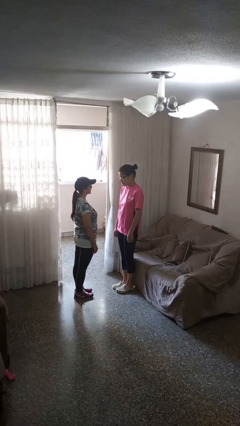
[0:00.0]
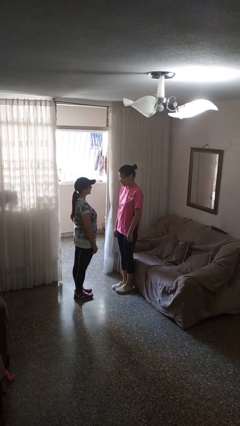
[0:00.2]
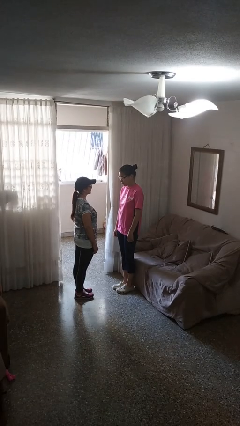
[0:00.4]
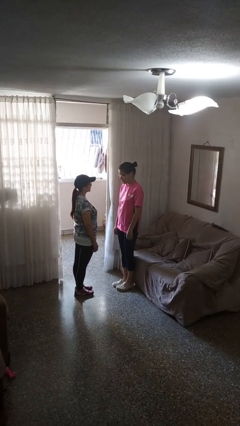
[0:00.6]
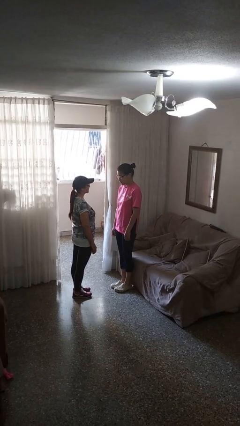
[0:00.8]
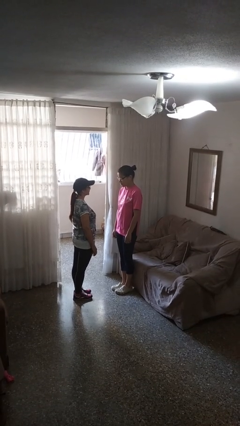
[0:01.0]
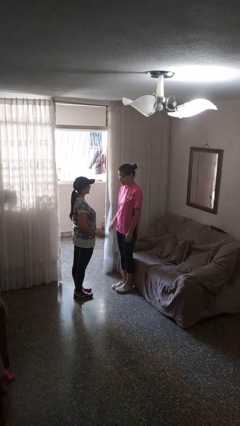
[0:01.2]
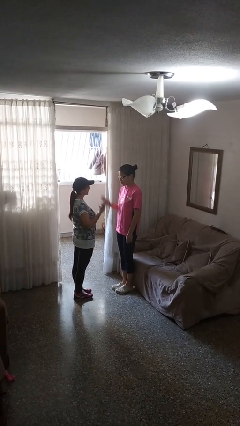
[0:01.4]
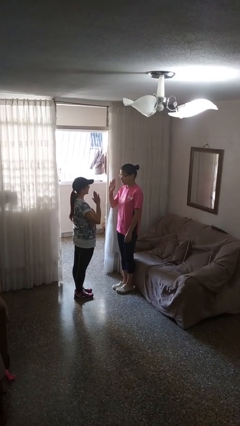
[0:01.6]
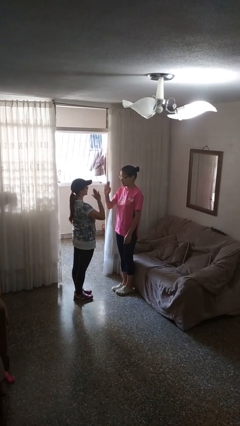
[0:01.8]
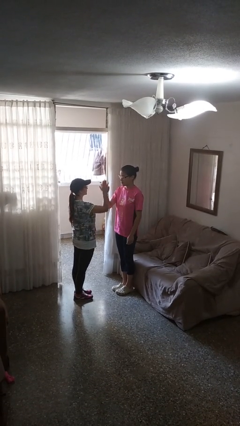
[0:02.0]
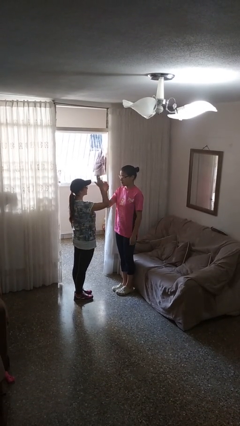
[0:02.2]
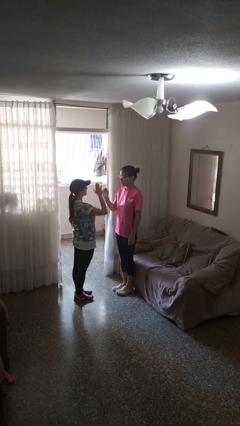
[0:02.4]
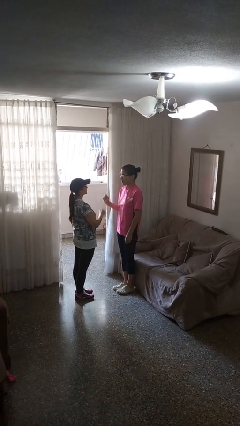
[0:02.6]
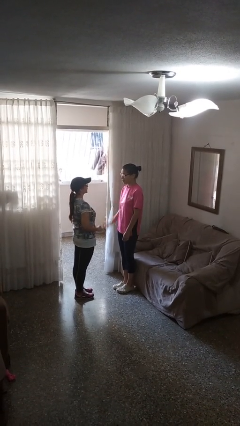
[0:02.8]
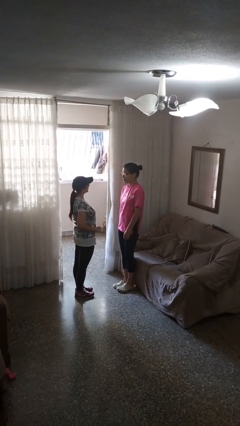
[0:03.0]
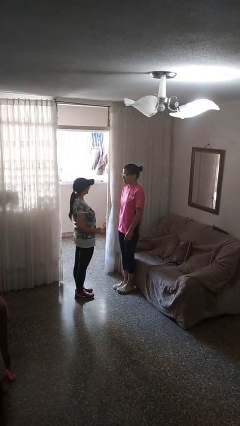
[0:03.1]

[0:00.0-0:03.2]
person highfives hand

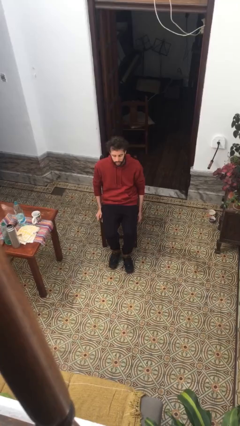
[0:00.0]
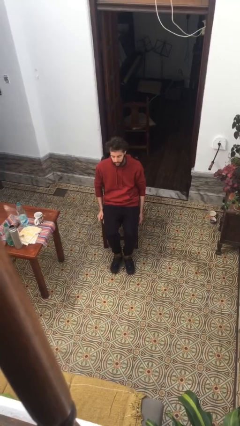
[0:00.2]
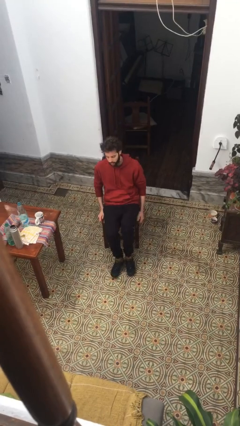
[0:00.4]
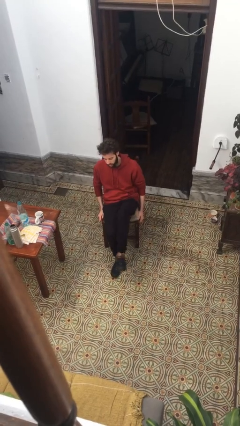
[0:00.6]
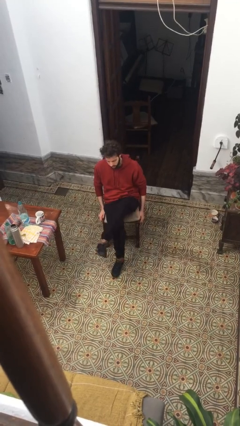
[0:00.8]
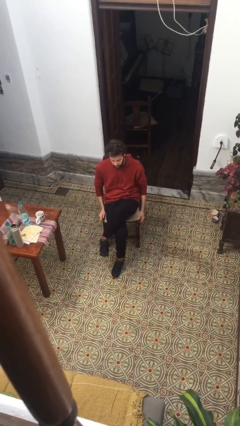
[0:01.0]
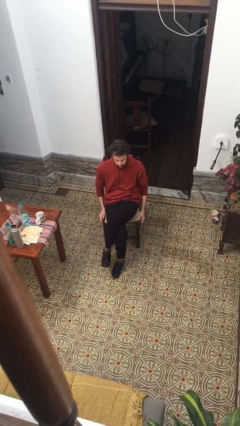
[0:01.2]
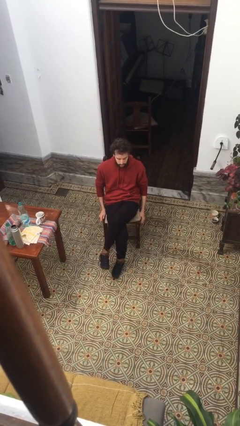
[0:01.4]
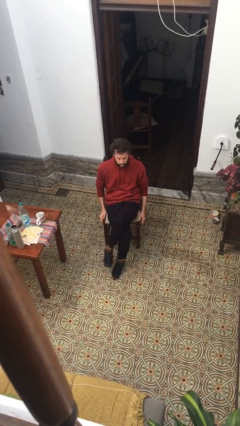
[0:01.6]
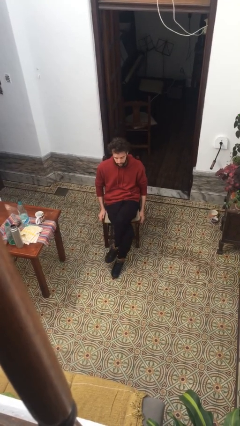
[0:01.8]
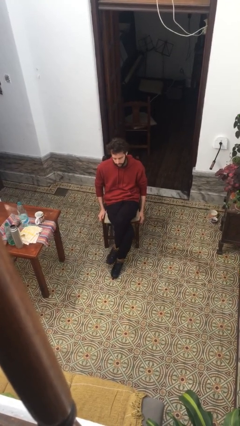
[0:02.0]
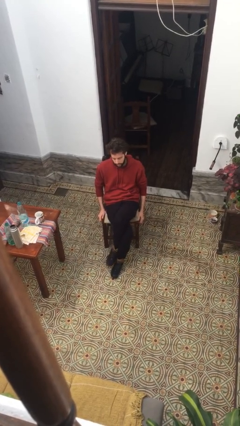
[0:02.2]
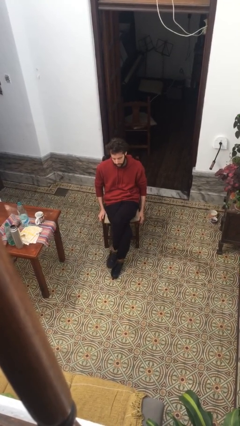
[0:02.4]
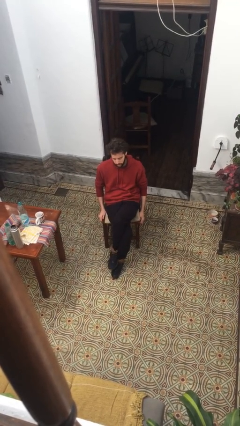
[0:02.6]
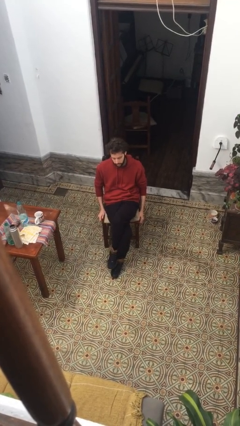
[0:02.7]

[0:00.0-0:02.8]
person crosses legs

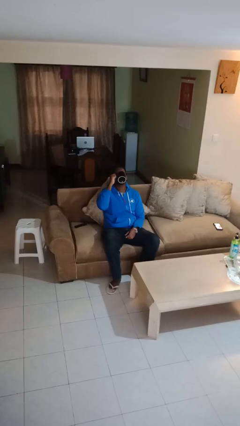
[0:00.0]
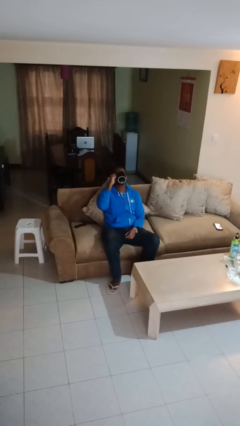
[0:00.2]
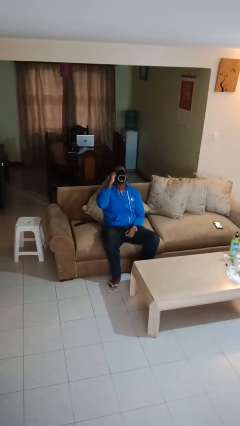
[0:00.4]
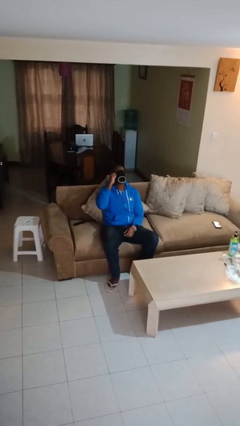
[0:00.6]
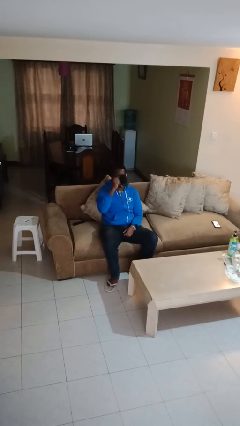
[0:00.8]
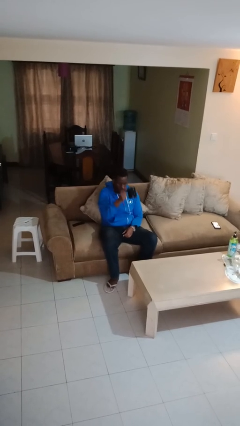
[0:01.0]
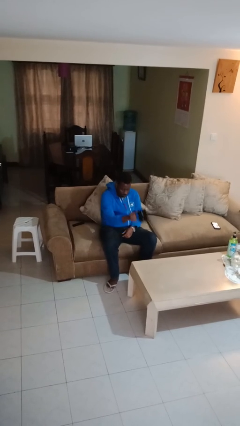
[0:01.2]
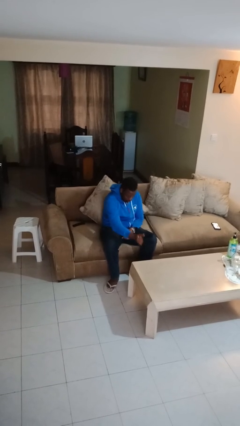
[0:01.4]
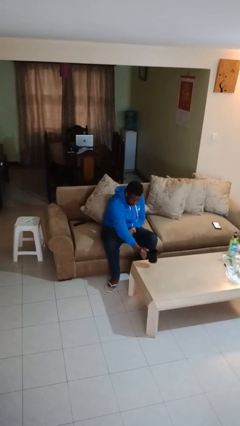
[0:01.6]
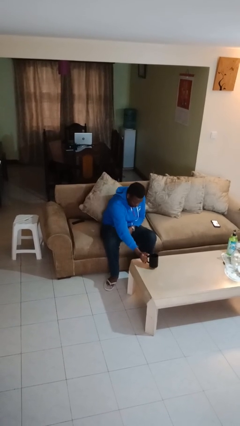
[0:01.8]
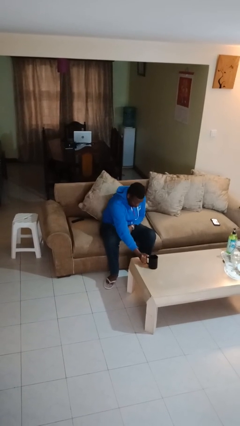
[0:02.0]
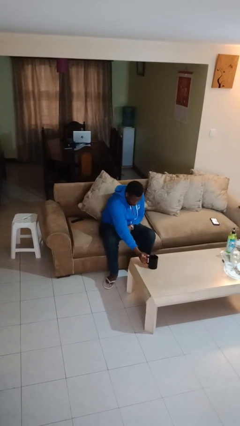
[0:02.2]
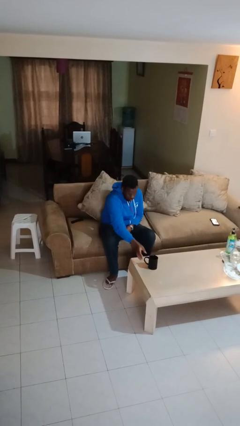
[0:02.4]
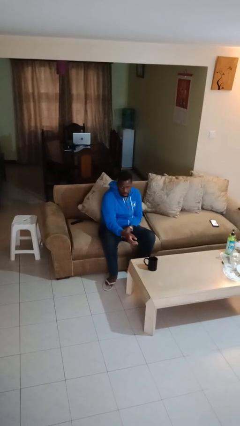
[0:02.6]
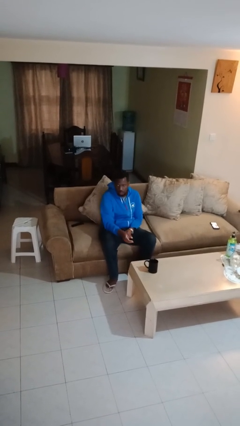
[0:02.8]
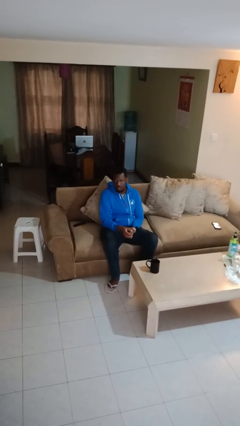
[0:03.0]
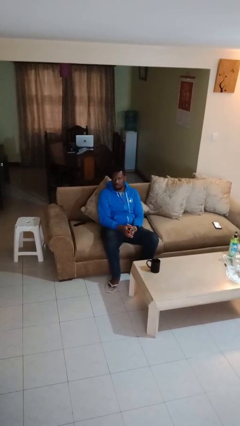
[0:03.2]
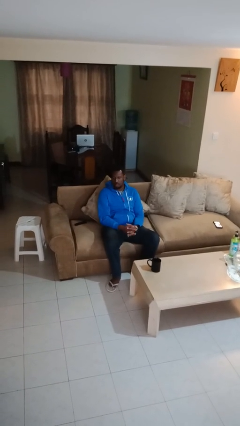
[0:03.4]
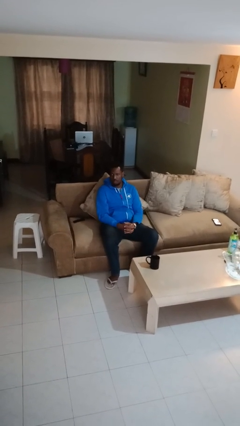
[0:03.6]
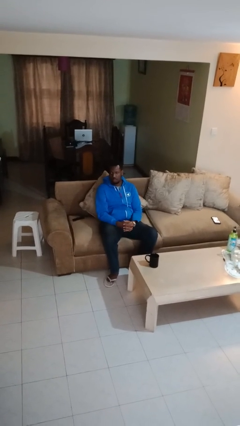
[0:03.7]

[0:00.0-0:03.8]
person puts down object on table

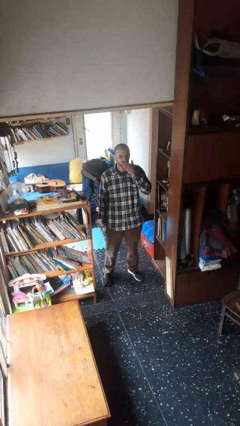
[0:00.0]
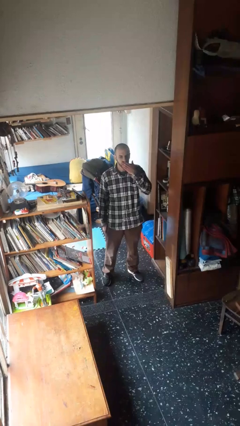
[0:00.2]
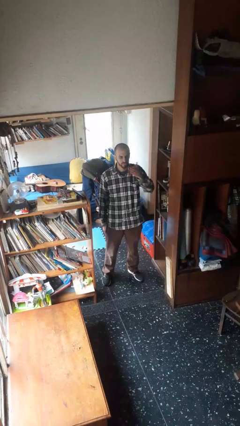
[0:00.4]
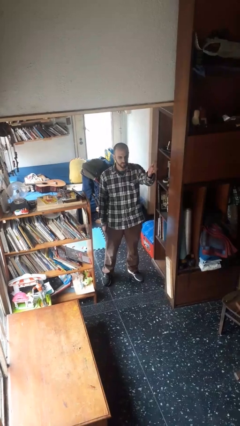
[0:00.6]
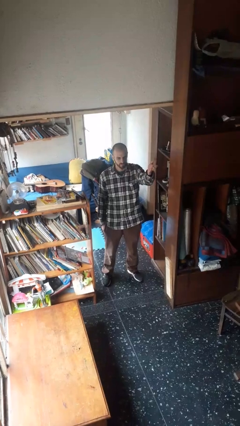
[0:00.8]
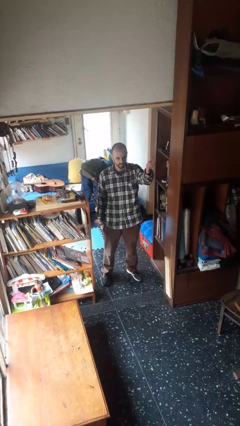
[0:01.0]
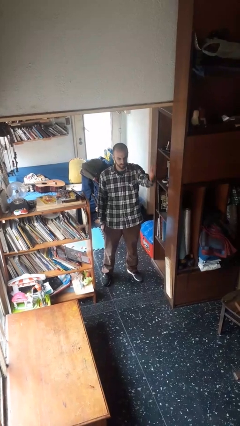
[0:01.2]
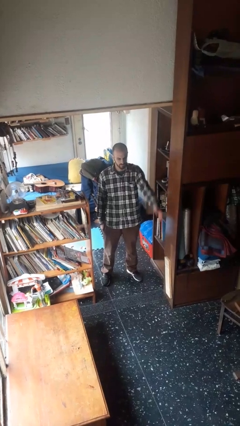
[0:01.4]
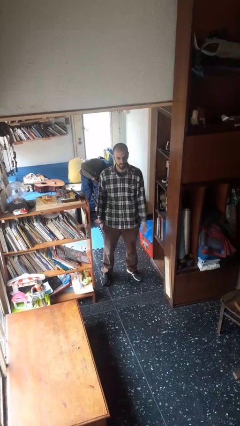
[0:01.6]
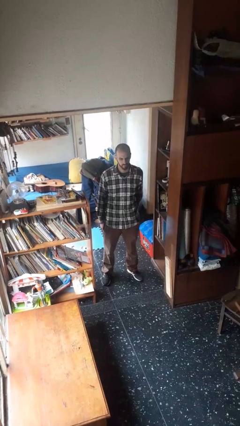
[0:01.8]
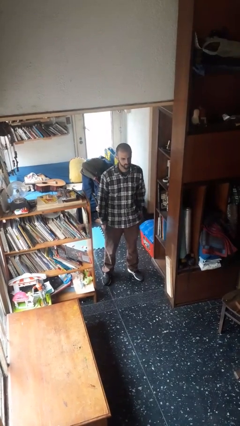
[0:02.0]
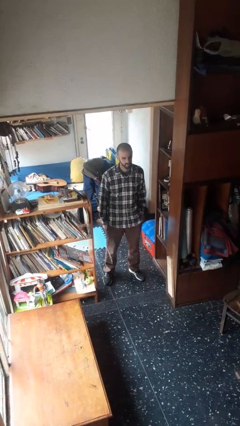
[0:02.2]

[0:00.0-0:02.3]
person gestures blow kiss

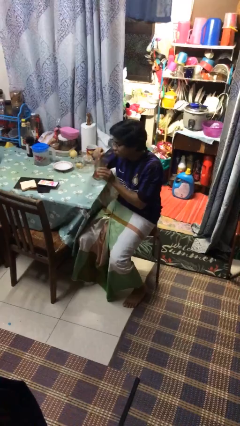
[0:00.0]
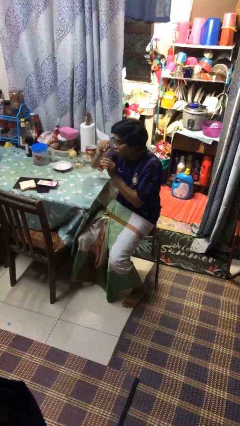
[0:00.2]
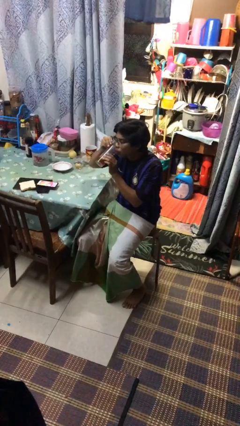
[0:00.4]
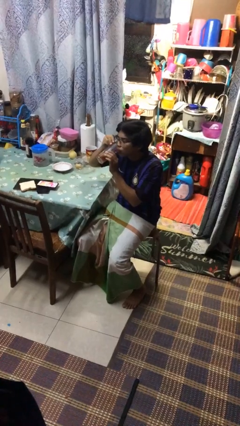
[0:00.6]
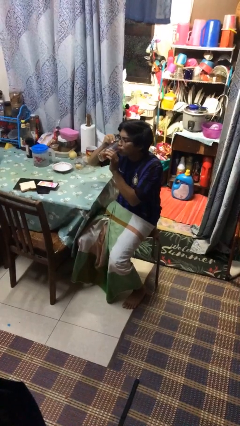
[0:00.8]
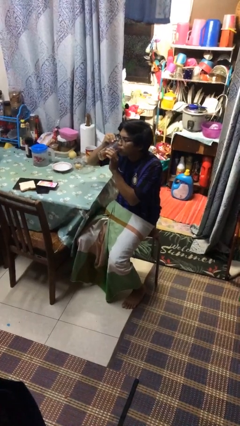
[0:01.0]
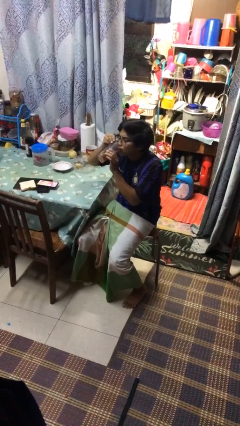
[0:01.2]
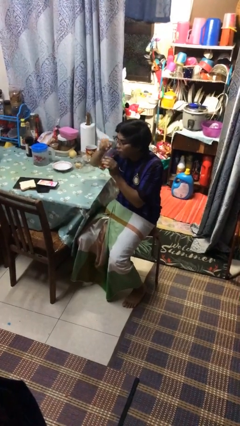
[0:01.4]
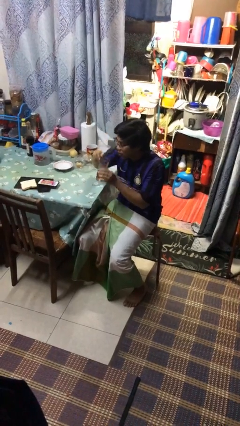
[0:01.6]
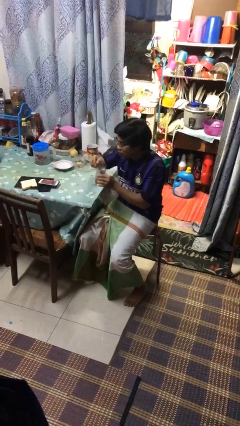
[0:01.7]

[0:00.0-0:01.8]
person drinks from mug

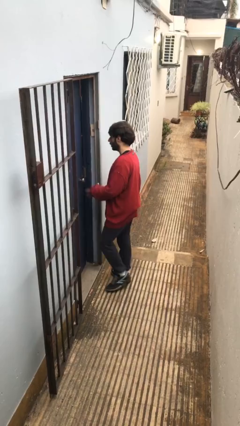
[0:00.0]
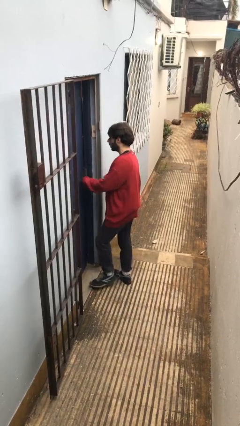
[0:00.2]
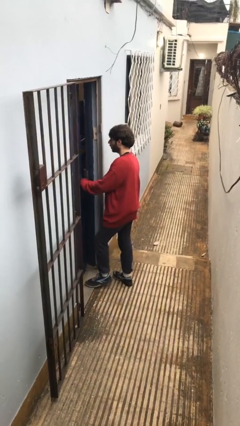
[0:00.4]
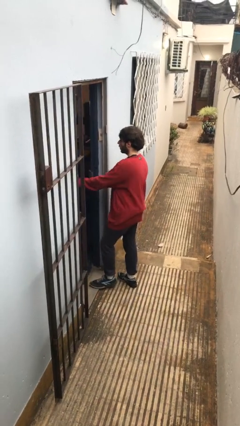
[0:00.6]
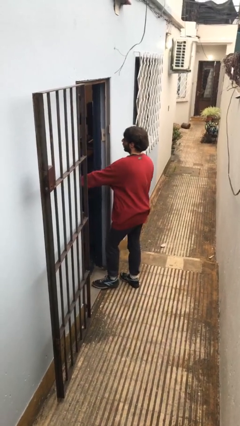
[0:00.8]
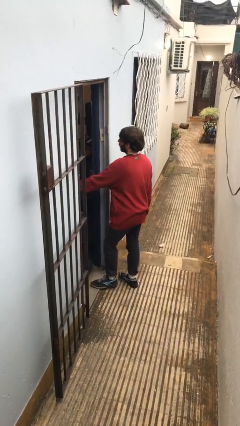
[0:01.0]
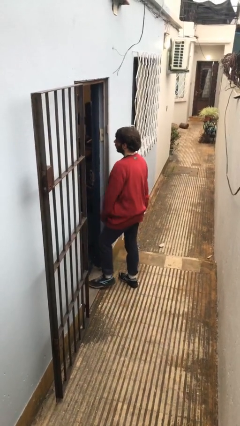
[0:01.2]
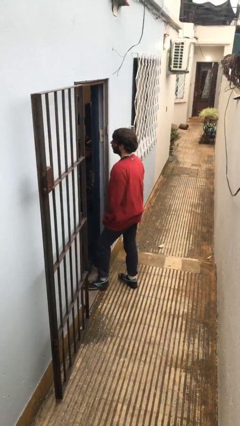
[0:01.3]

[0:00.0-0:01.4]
person opens facility door

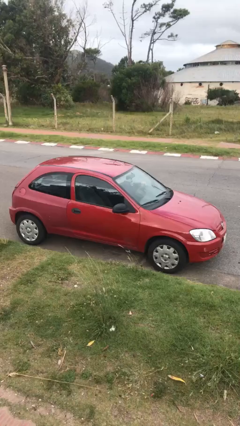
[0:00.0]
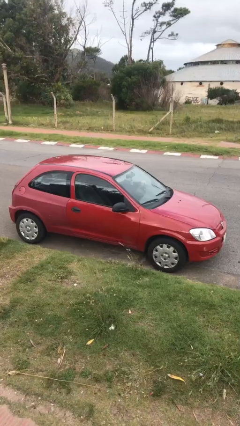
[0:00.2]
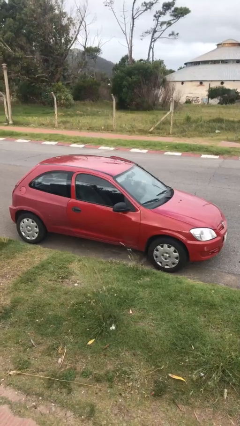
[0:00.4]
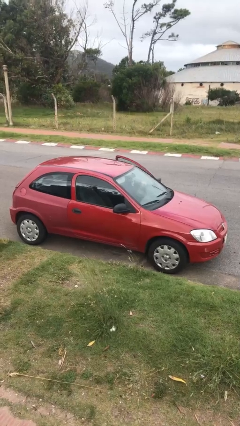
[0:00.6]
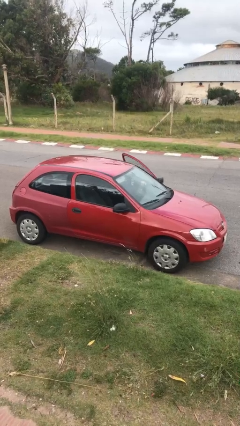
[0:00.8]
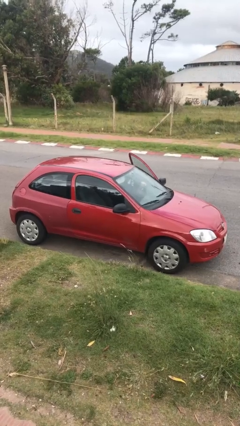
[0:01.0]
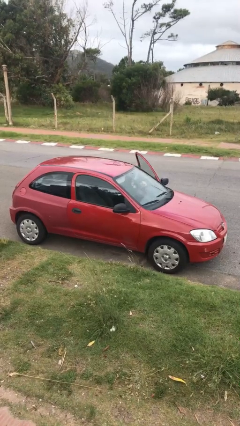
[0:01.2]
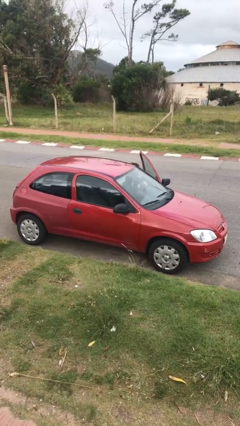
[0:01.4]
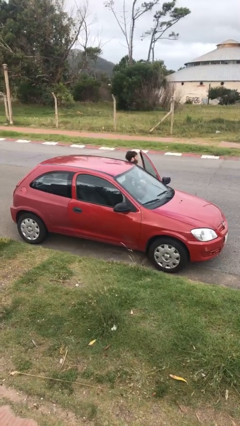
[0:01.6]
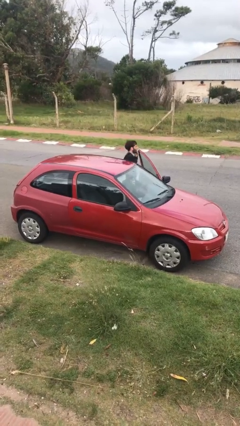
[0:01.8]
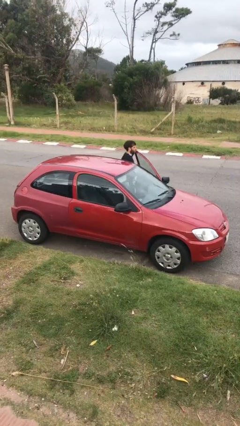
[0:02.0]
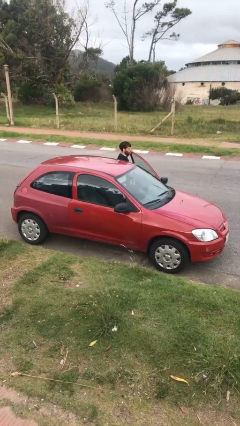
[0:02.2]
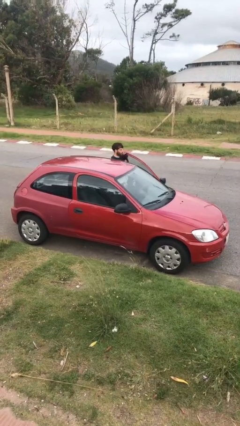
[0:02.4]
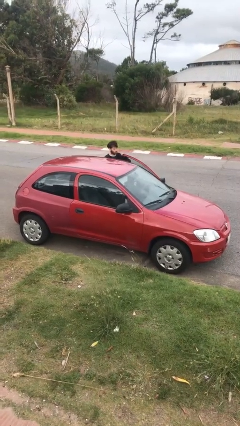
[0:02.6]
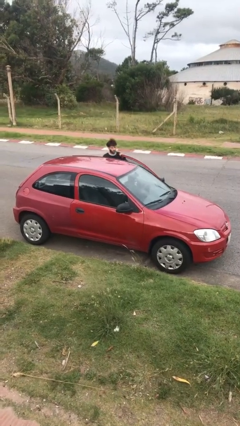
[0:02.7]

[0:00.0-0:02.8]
car drops off person
